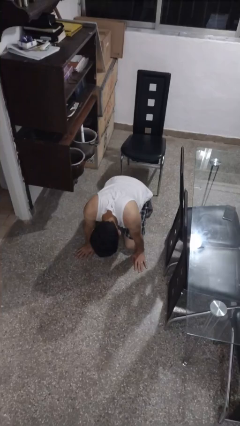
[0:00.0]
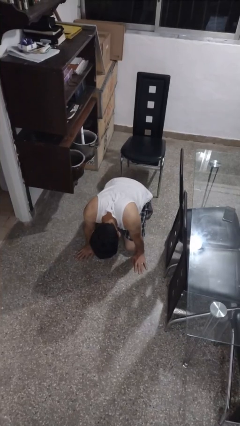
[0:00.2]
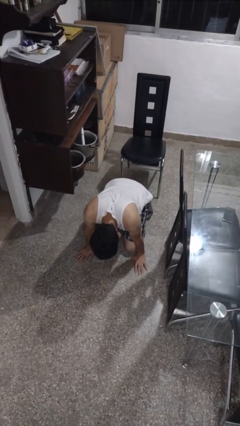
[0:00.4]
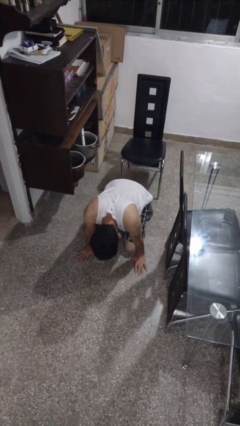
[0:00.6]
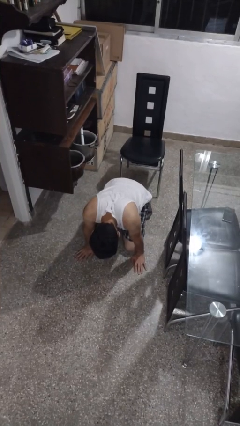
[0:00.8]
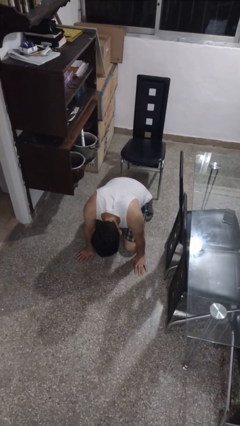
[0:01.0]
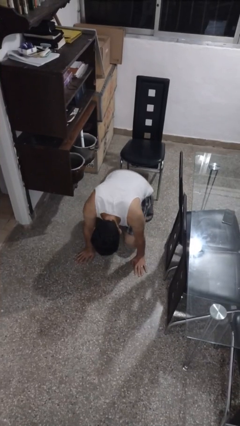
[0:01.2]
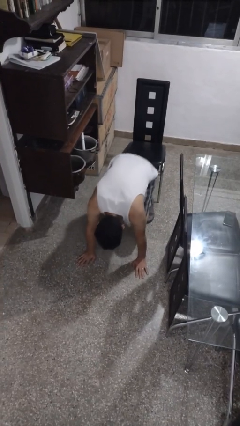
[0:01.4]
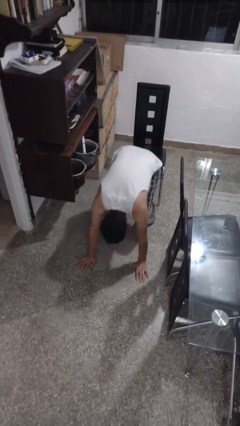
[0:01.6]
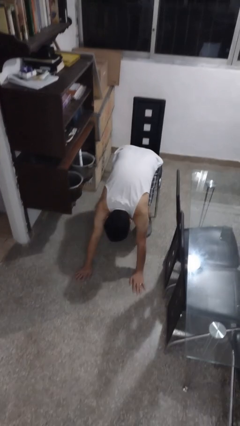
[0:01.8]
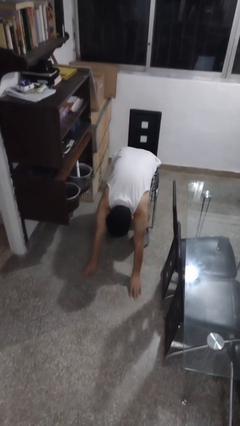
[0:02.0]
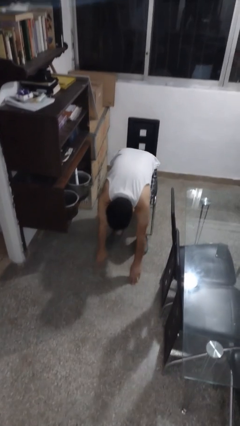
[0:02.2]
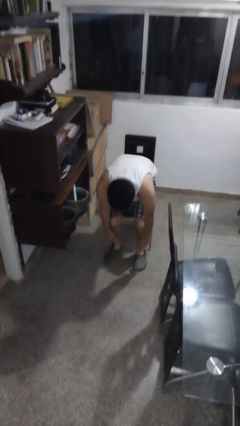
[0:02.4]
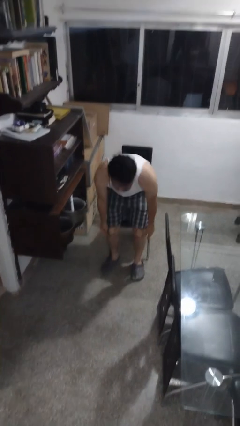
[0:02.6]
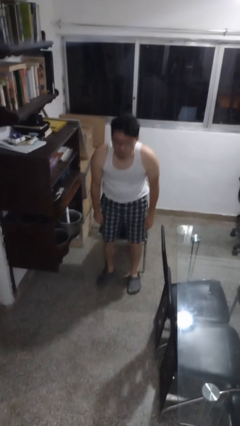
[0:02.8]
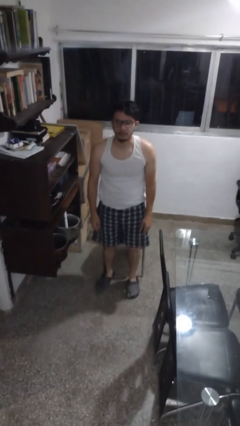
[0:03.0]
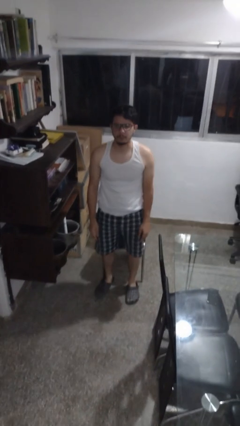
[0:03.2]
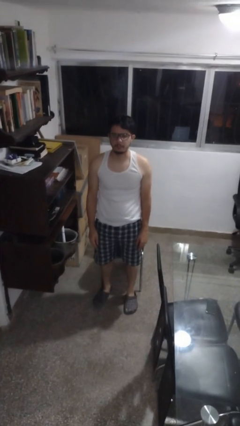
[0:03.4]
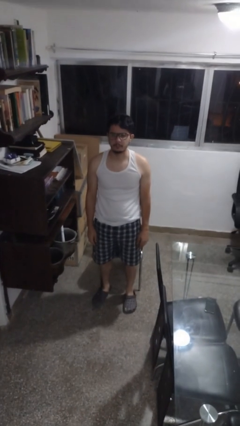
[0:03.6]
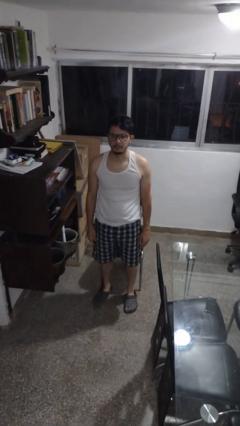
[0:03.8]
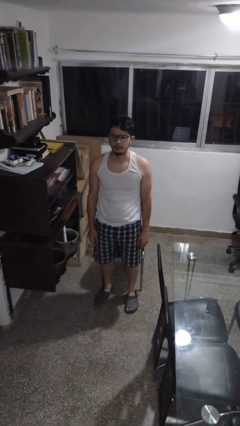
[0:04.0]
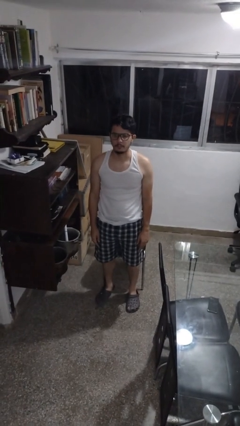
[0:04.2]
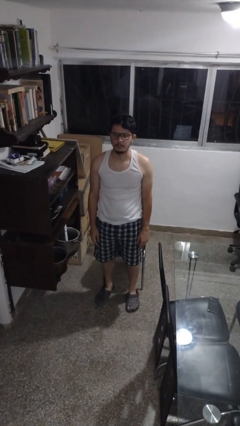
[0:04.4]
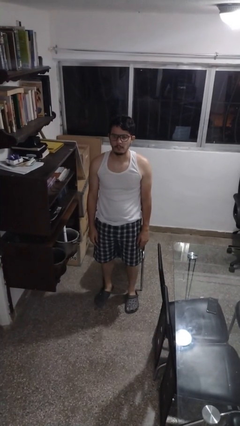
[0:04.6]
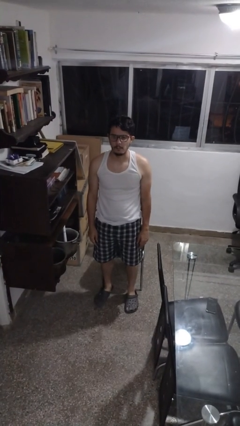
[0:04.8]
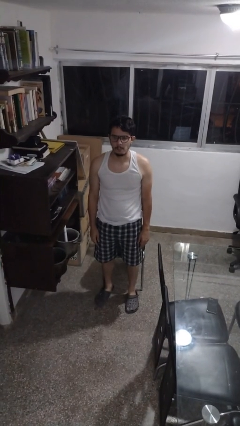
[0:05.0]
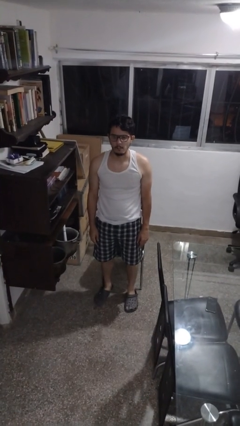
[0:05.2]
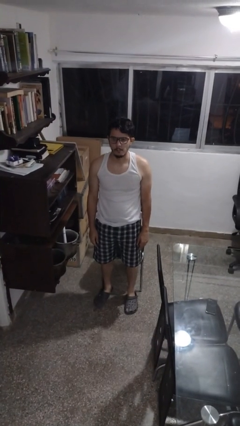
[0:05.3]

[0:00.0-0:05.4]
person stands up from floor

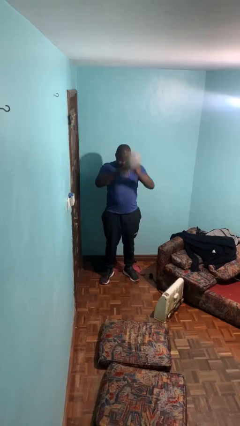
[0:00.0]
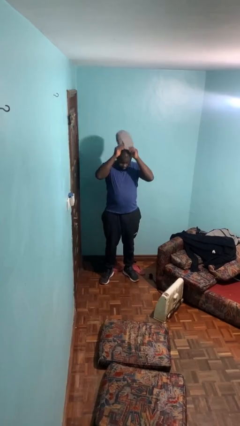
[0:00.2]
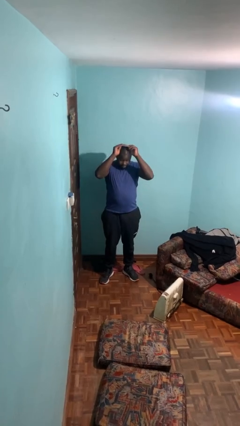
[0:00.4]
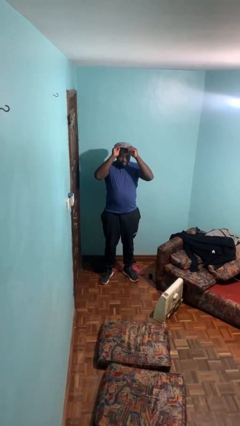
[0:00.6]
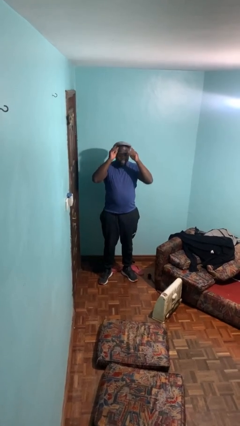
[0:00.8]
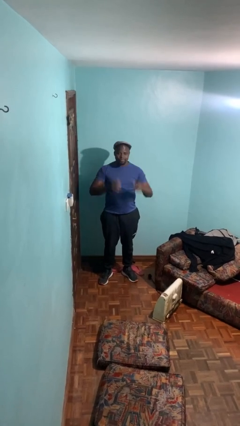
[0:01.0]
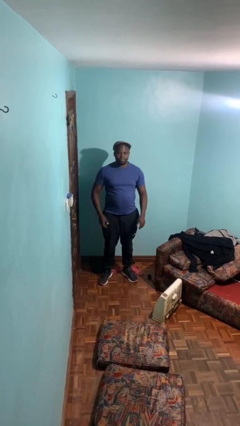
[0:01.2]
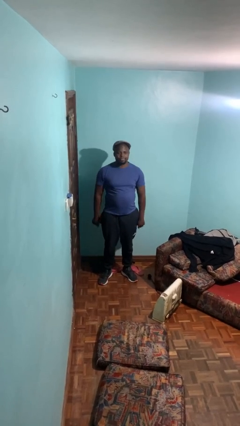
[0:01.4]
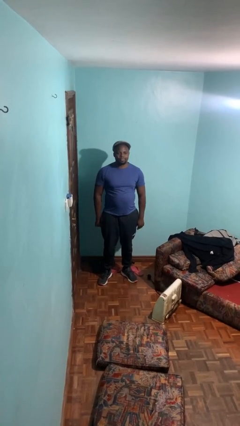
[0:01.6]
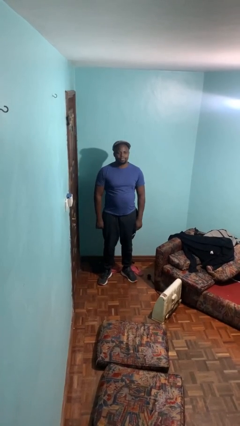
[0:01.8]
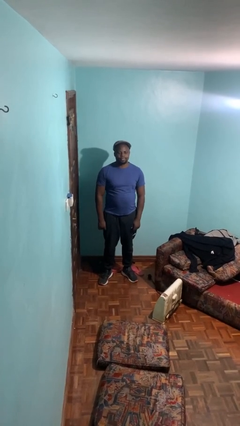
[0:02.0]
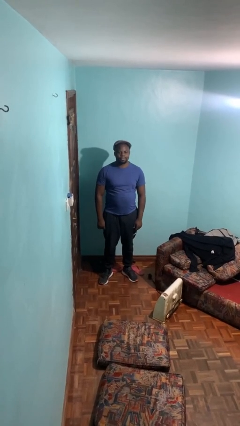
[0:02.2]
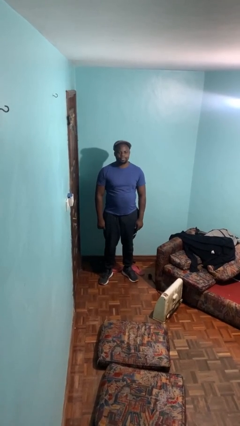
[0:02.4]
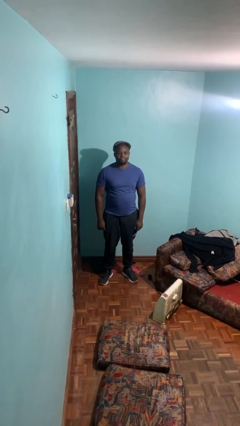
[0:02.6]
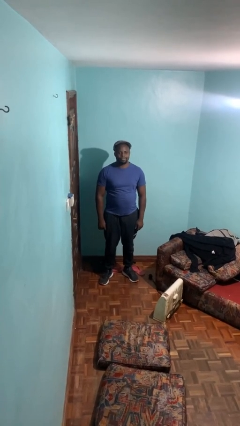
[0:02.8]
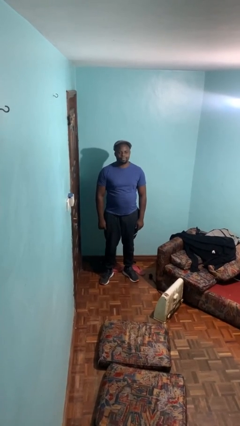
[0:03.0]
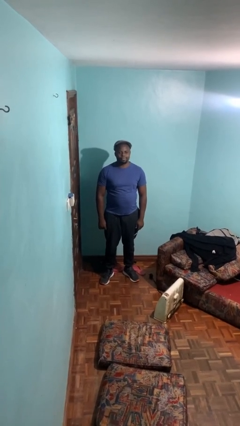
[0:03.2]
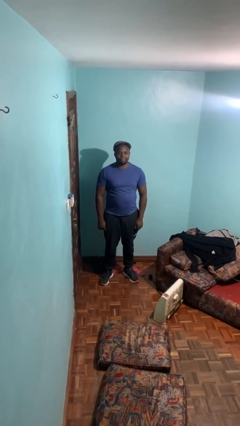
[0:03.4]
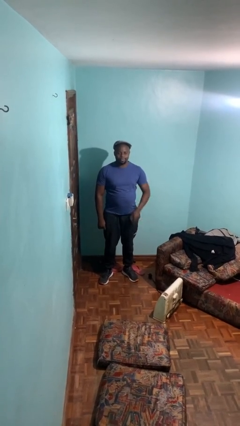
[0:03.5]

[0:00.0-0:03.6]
person puts on hat

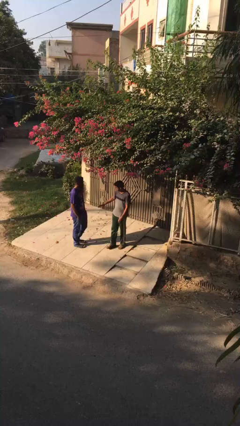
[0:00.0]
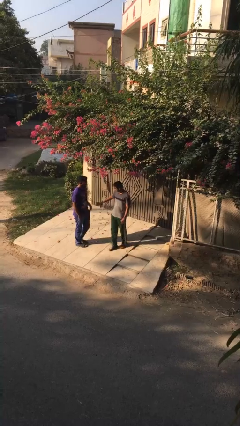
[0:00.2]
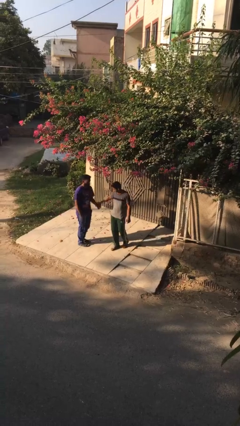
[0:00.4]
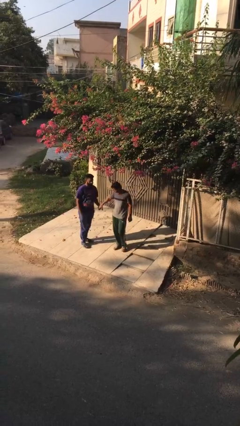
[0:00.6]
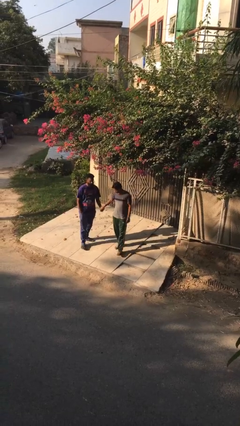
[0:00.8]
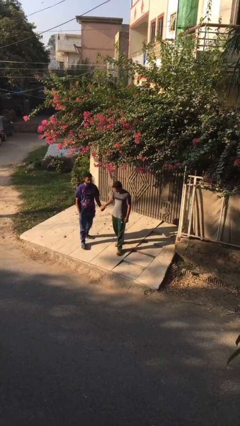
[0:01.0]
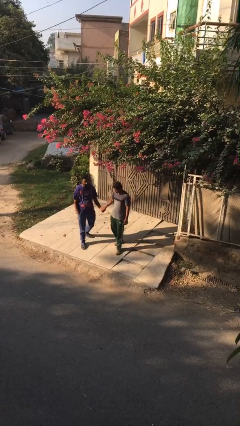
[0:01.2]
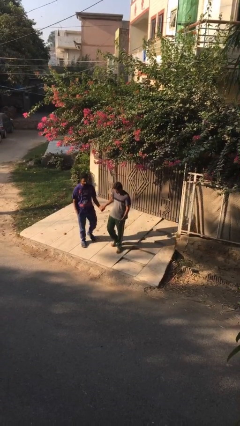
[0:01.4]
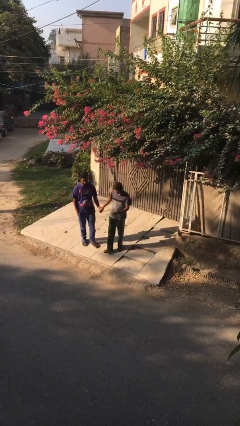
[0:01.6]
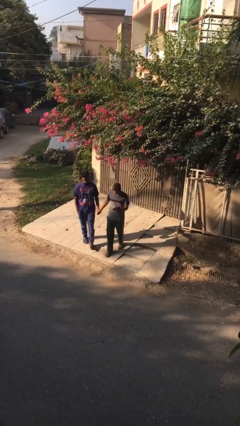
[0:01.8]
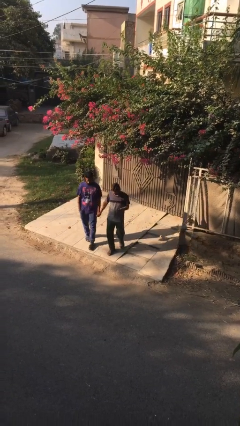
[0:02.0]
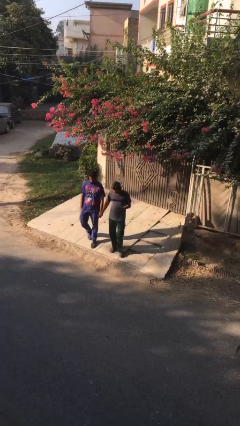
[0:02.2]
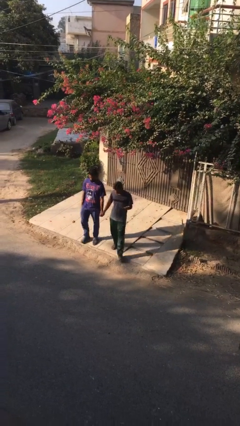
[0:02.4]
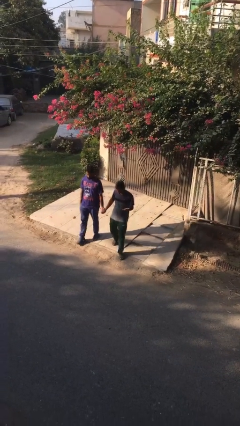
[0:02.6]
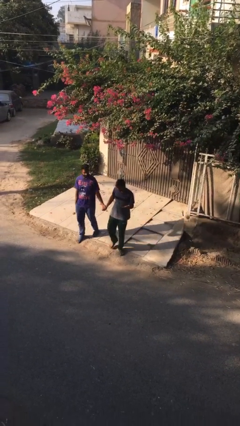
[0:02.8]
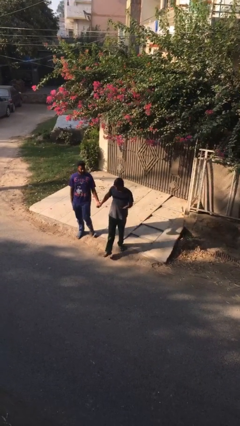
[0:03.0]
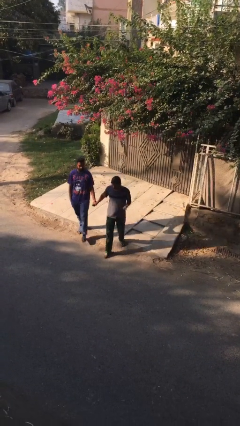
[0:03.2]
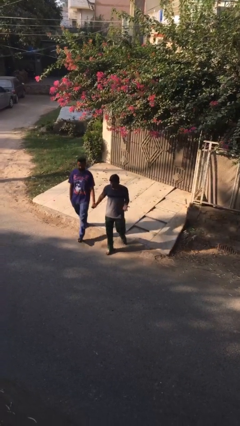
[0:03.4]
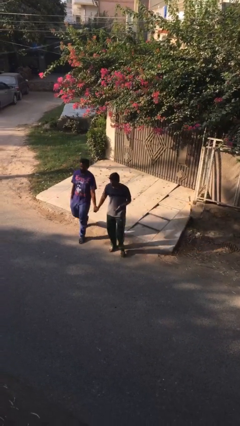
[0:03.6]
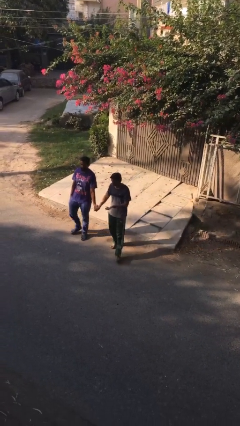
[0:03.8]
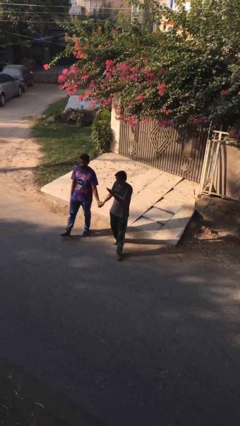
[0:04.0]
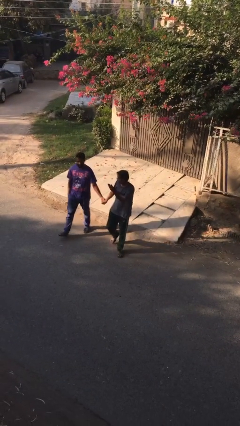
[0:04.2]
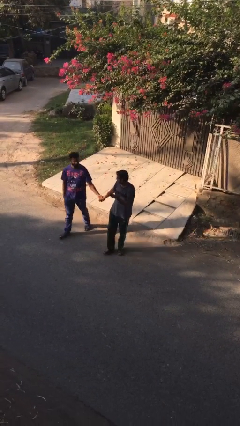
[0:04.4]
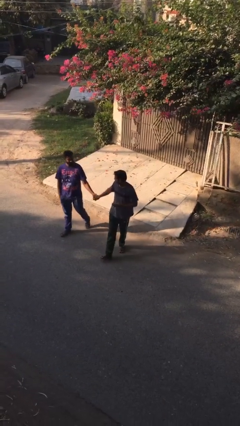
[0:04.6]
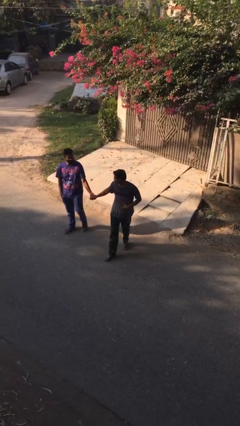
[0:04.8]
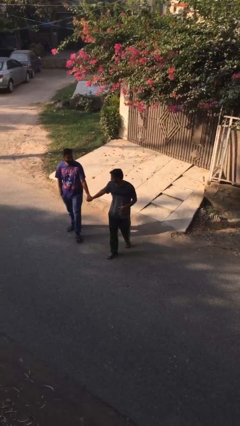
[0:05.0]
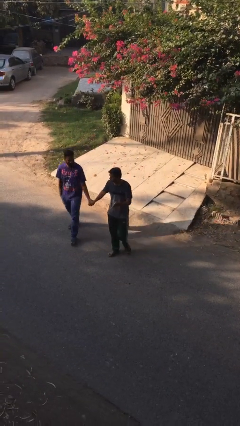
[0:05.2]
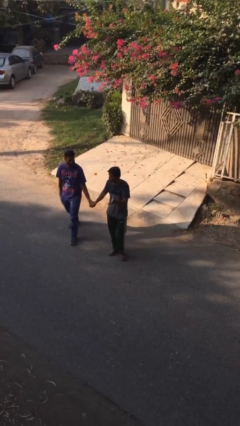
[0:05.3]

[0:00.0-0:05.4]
person holds hand

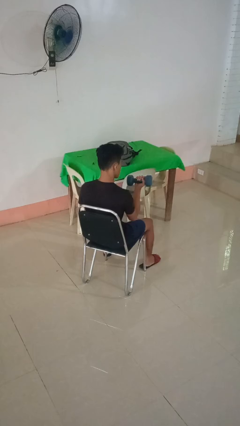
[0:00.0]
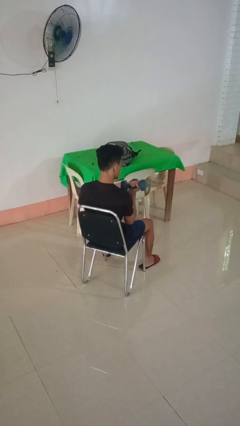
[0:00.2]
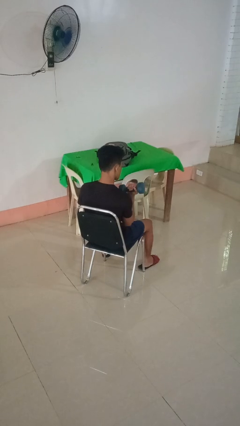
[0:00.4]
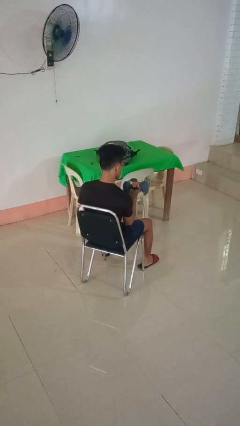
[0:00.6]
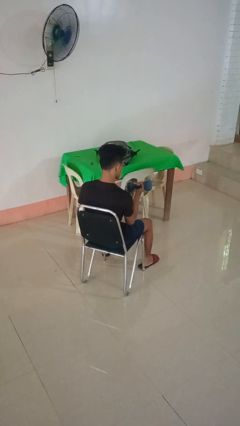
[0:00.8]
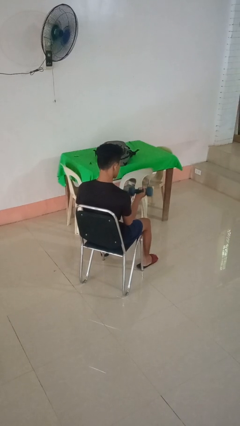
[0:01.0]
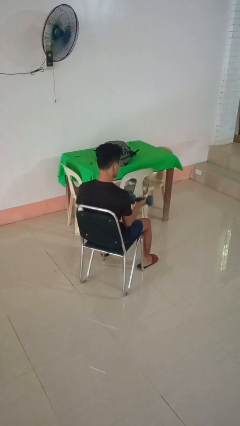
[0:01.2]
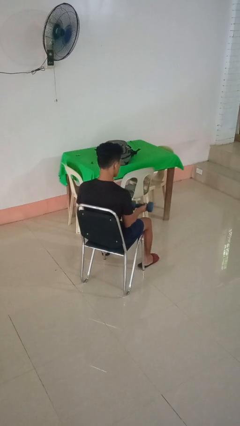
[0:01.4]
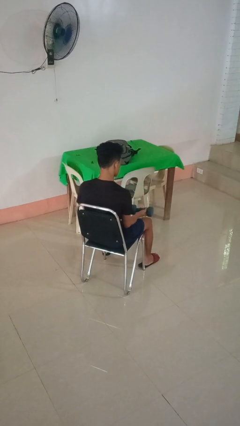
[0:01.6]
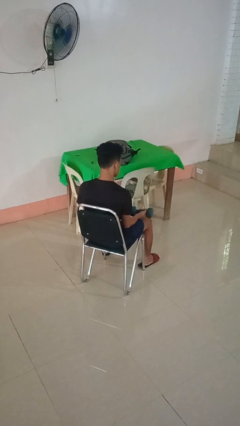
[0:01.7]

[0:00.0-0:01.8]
person lifts dumbbells

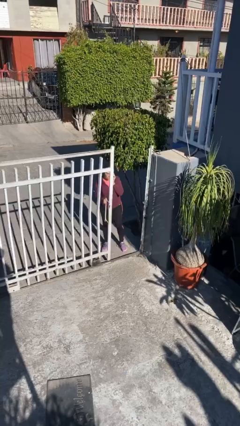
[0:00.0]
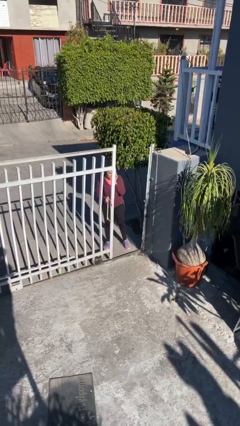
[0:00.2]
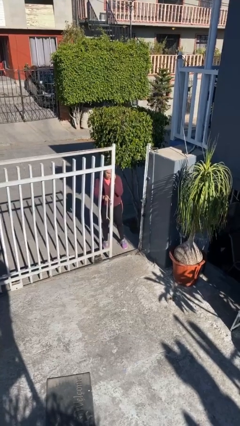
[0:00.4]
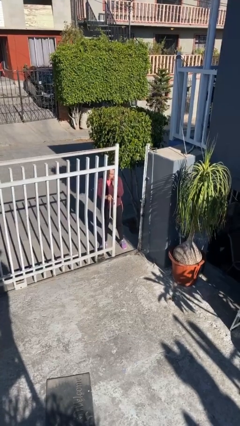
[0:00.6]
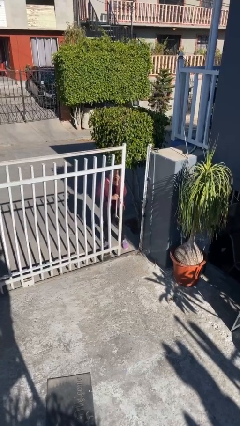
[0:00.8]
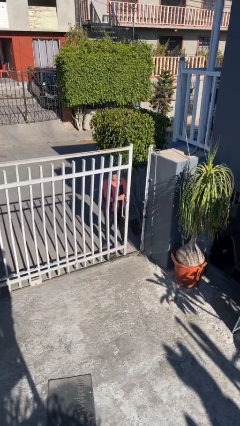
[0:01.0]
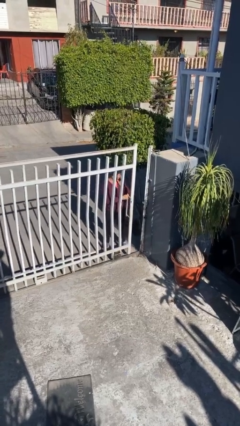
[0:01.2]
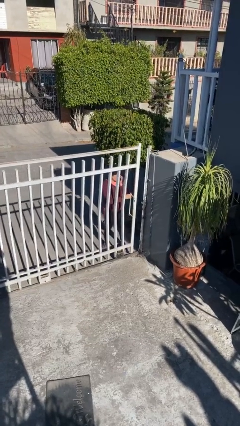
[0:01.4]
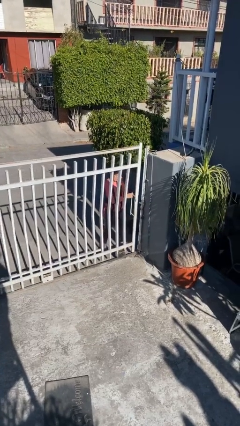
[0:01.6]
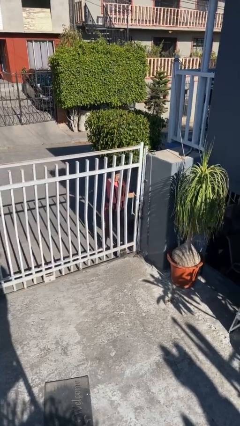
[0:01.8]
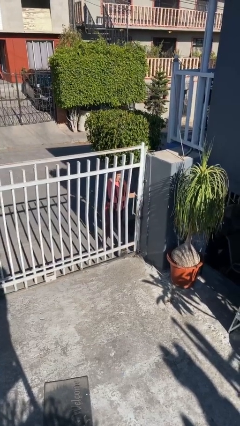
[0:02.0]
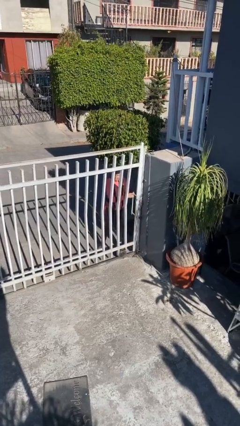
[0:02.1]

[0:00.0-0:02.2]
person closes facility door
